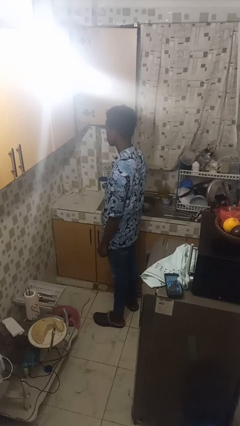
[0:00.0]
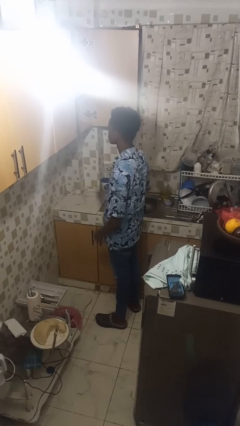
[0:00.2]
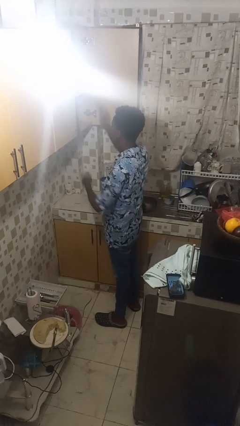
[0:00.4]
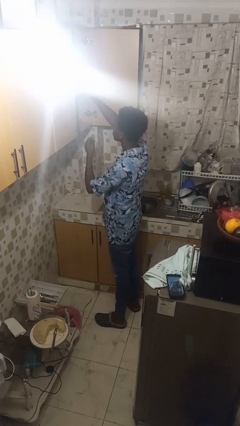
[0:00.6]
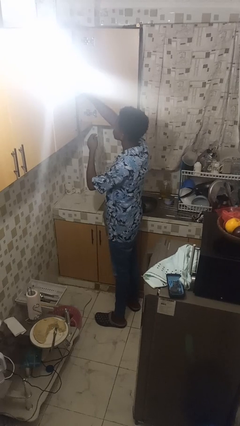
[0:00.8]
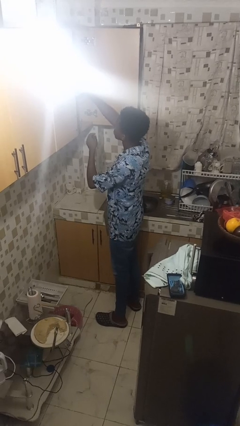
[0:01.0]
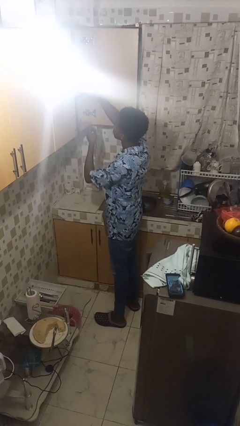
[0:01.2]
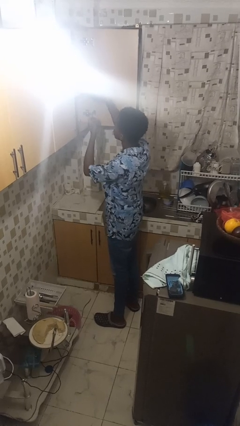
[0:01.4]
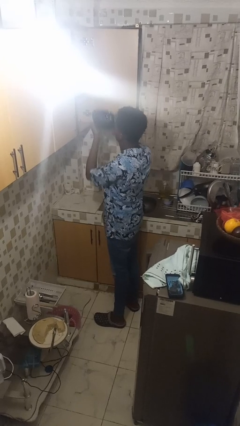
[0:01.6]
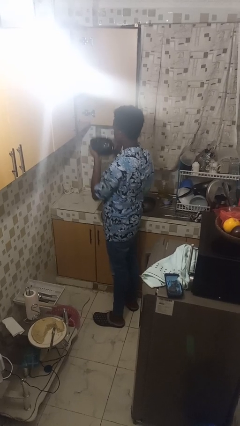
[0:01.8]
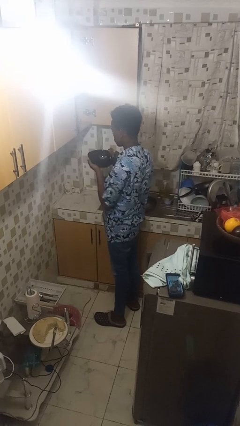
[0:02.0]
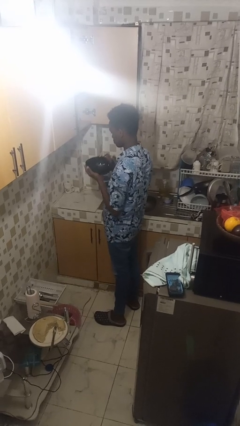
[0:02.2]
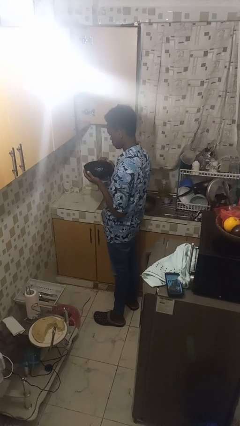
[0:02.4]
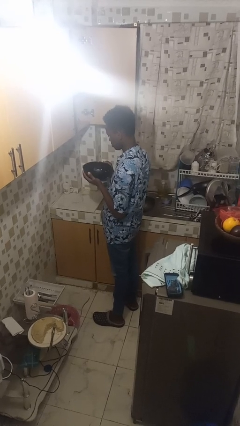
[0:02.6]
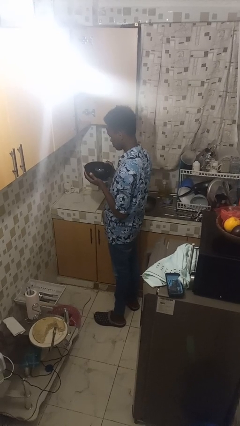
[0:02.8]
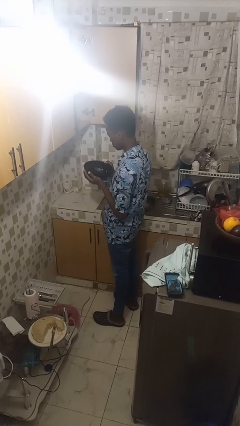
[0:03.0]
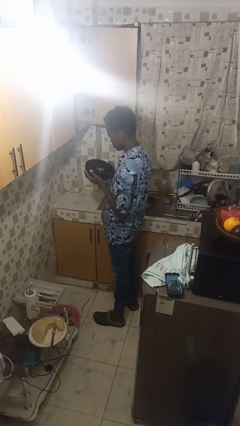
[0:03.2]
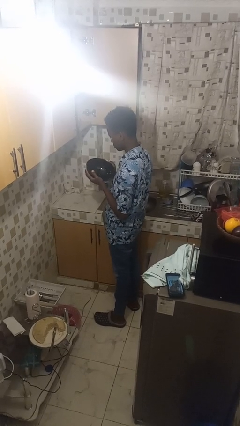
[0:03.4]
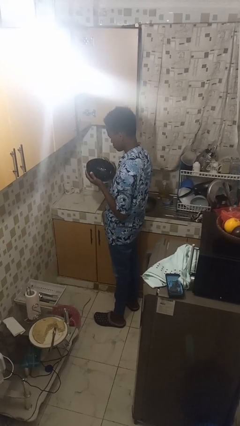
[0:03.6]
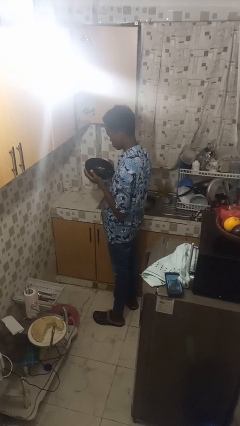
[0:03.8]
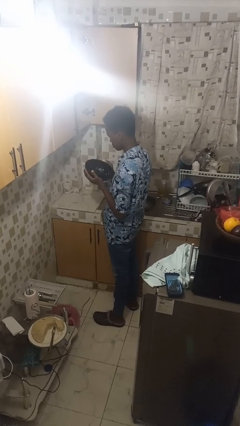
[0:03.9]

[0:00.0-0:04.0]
person picks up object from cabinet

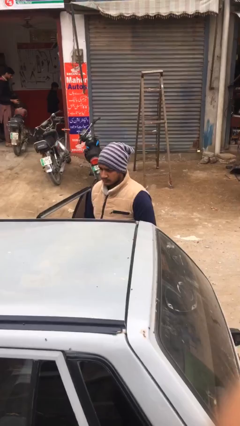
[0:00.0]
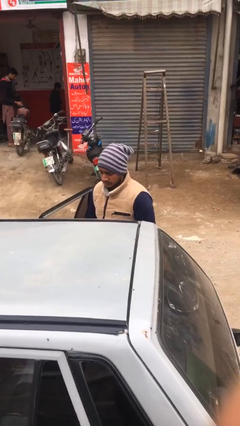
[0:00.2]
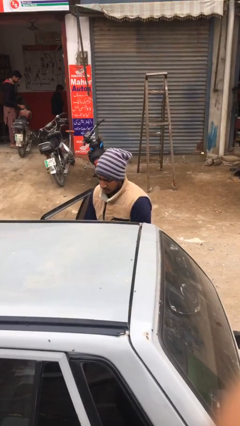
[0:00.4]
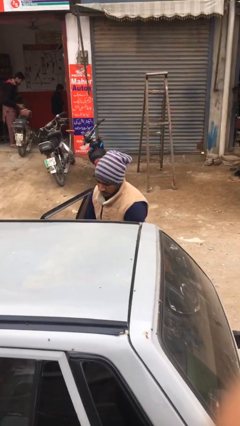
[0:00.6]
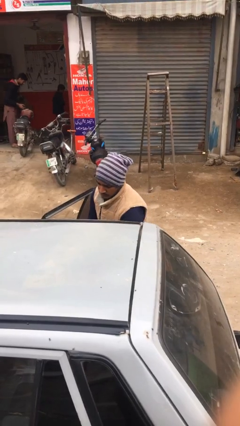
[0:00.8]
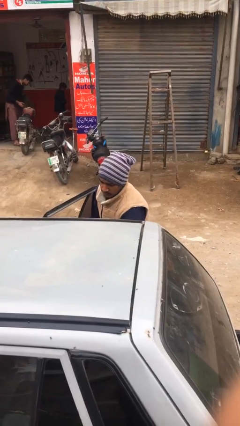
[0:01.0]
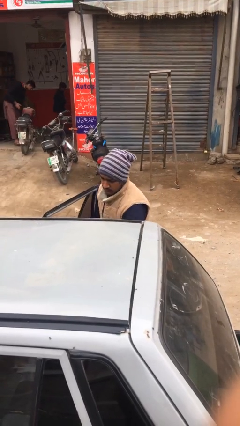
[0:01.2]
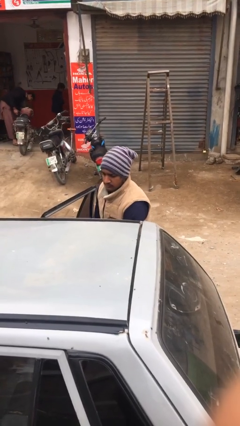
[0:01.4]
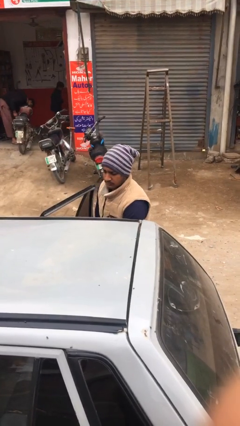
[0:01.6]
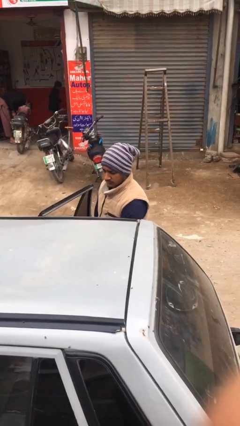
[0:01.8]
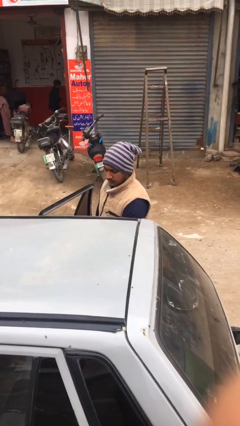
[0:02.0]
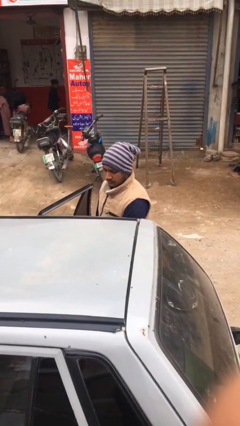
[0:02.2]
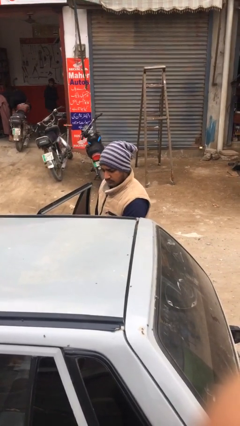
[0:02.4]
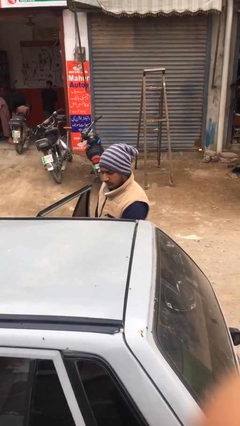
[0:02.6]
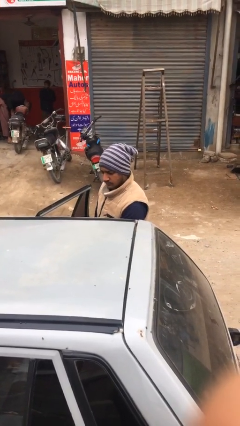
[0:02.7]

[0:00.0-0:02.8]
person loads car

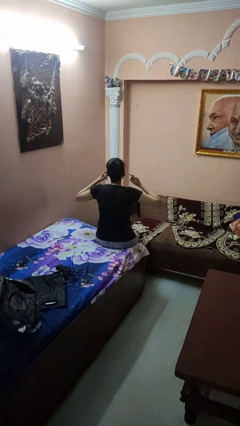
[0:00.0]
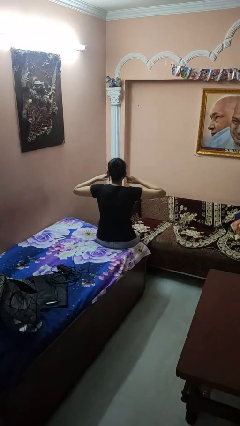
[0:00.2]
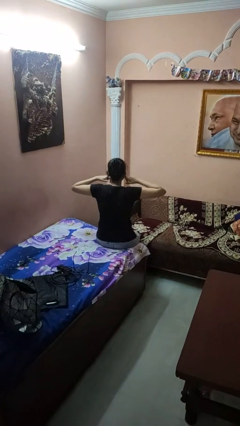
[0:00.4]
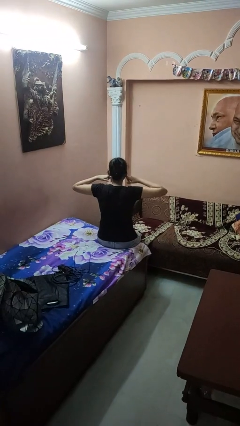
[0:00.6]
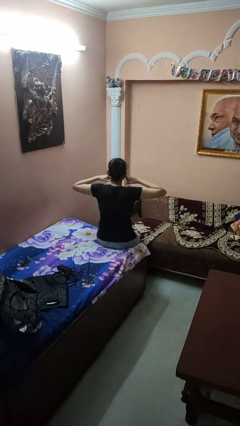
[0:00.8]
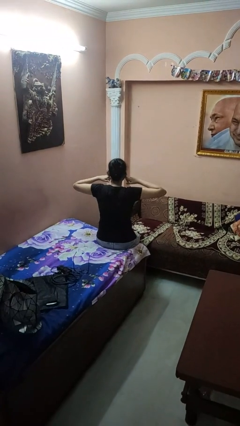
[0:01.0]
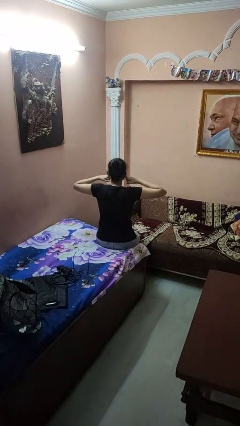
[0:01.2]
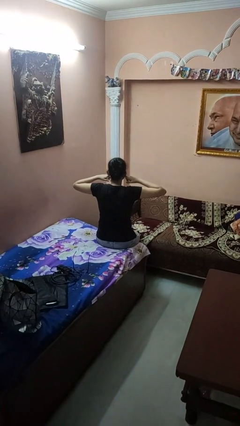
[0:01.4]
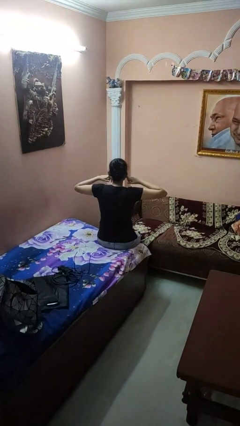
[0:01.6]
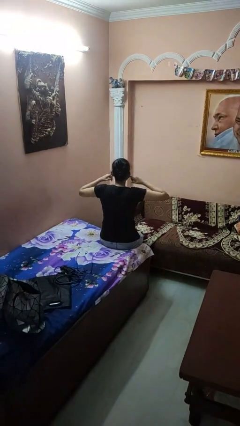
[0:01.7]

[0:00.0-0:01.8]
person puts fingers in ear

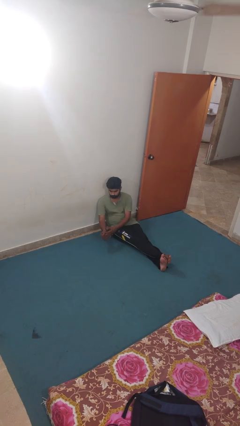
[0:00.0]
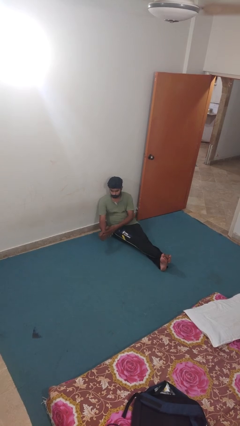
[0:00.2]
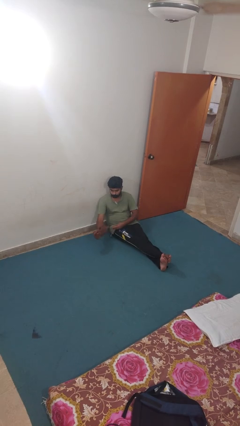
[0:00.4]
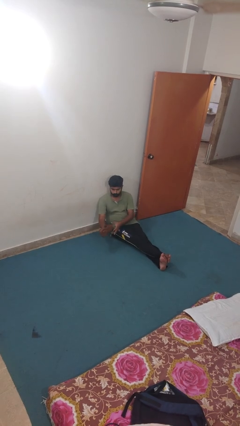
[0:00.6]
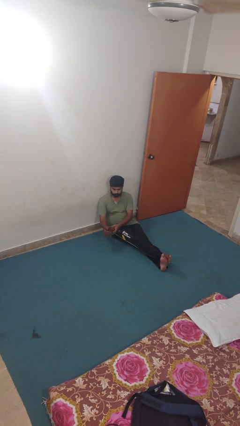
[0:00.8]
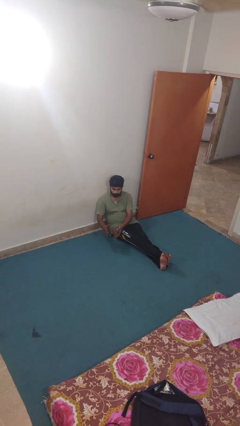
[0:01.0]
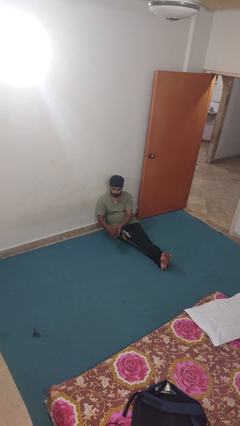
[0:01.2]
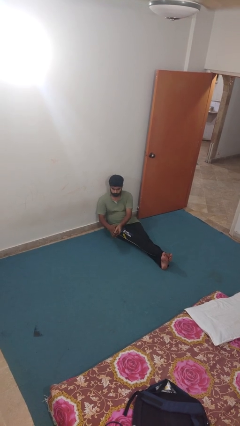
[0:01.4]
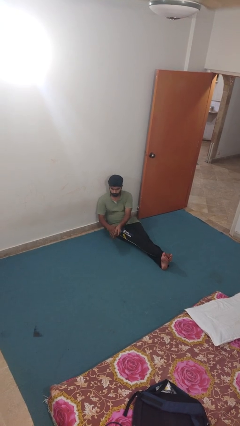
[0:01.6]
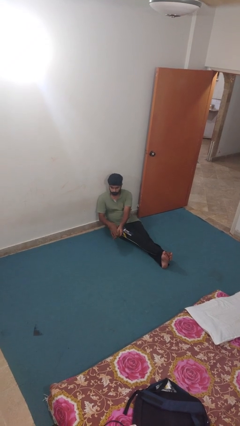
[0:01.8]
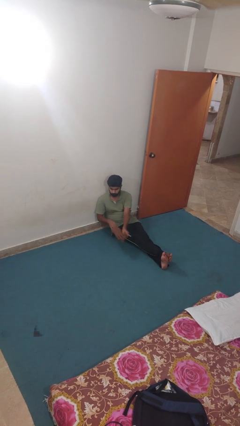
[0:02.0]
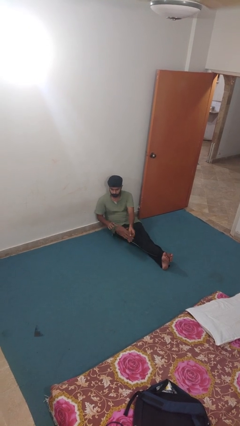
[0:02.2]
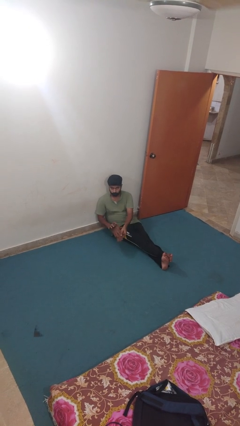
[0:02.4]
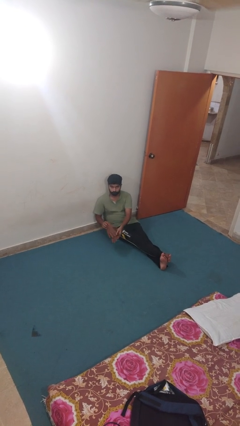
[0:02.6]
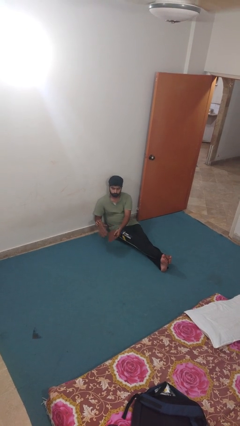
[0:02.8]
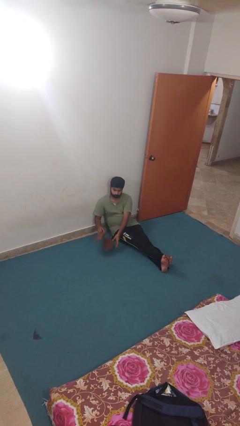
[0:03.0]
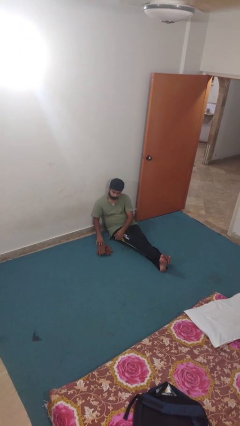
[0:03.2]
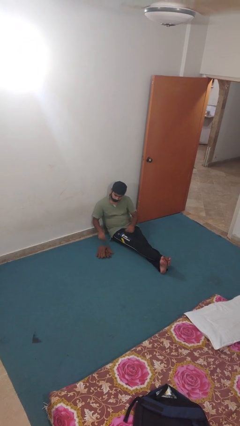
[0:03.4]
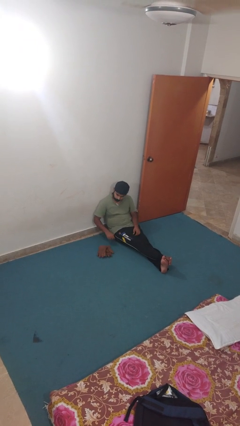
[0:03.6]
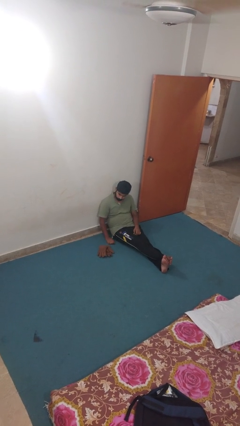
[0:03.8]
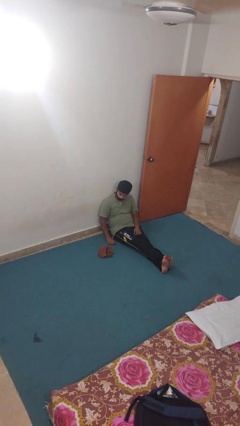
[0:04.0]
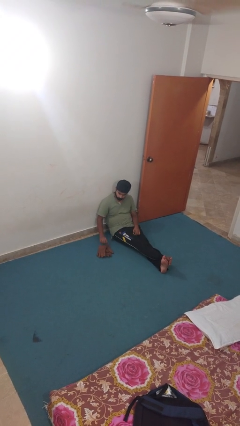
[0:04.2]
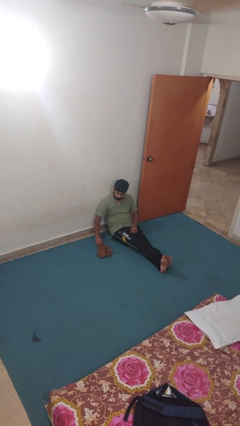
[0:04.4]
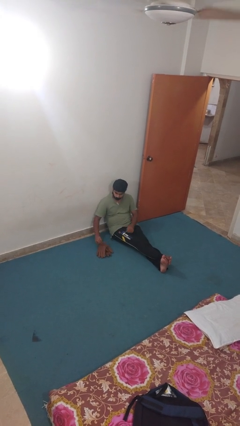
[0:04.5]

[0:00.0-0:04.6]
person takes off gloves

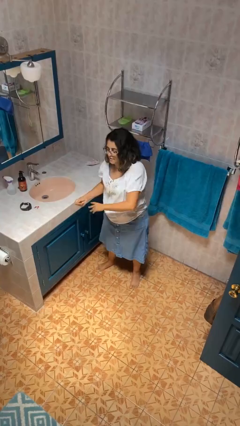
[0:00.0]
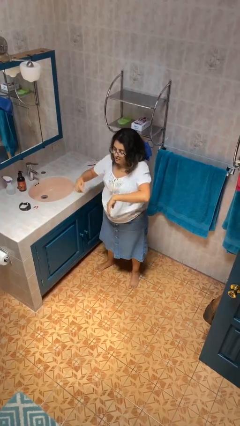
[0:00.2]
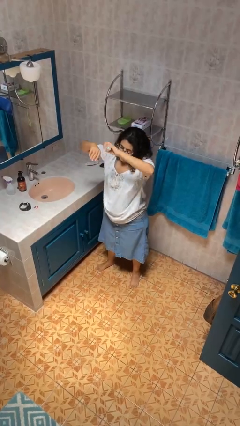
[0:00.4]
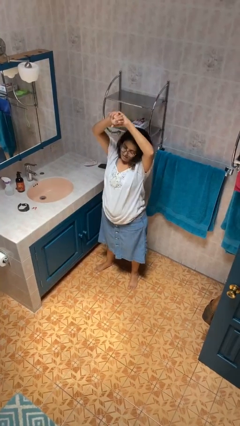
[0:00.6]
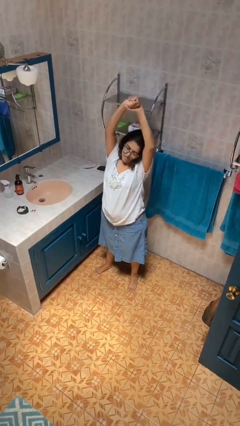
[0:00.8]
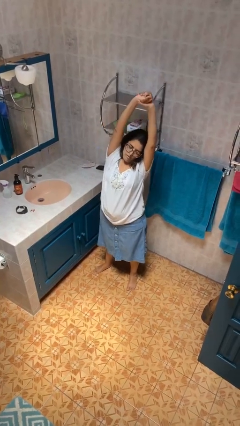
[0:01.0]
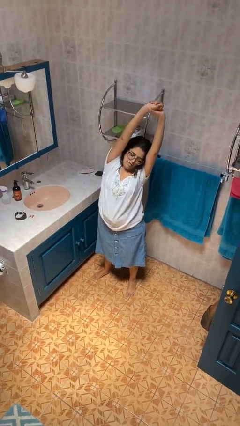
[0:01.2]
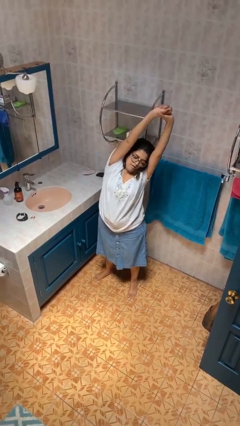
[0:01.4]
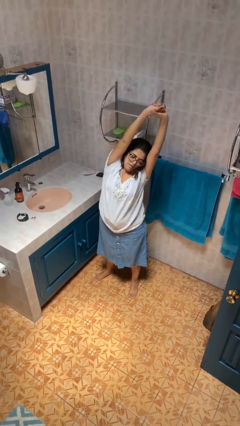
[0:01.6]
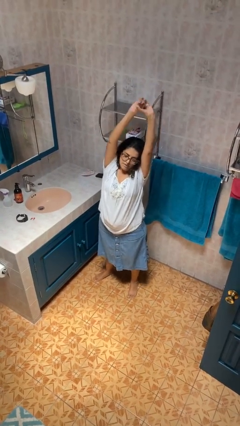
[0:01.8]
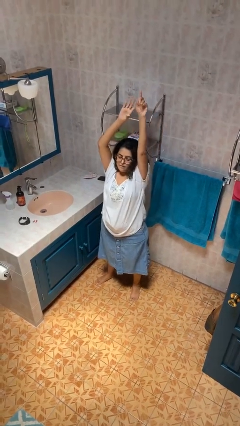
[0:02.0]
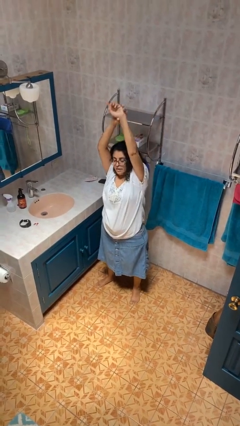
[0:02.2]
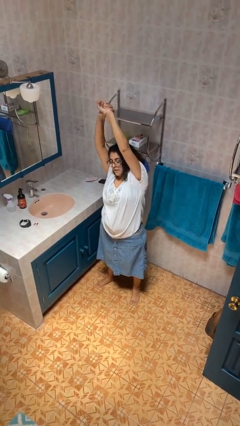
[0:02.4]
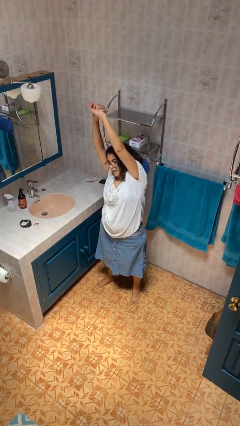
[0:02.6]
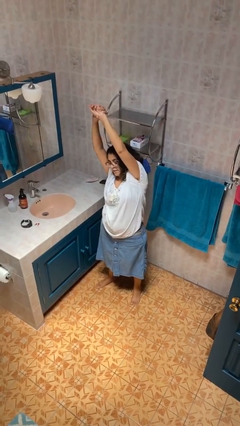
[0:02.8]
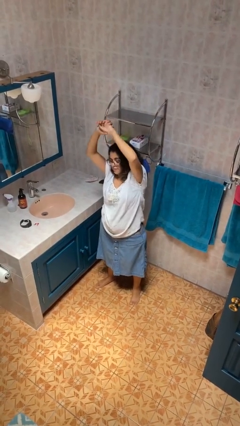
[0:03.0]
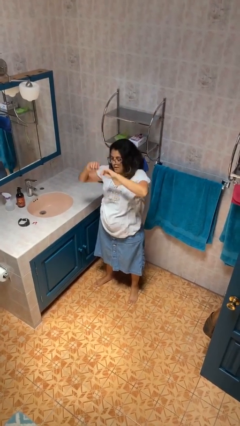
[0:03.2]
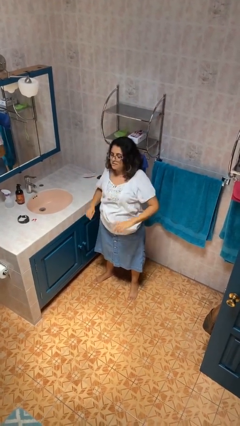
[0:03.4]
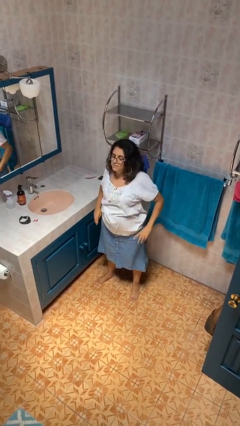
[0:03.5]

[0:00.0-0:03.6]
person stretches arms over head

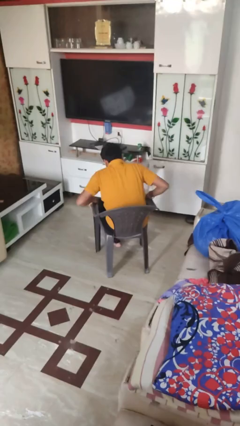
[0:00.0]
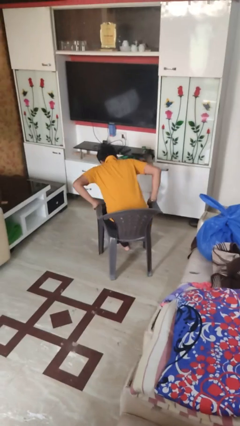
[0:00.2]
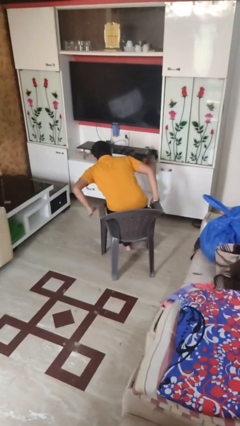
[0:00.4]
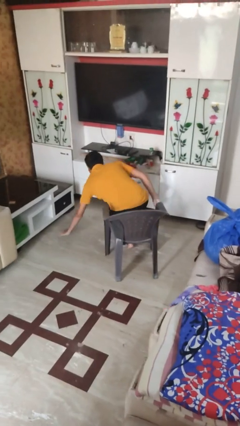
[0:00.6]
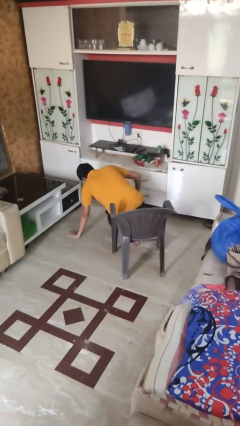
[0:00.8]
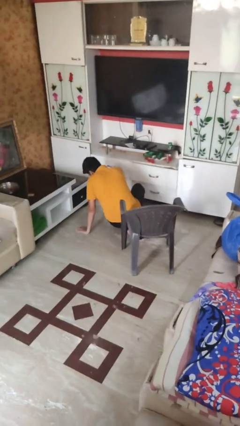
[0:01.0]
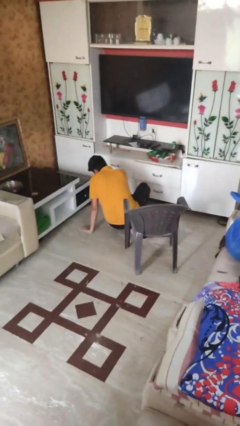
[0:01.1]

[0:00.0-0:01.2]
person falls from chair
